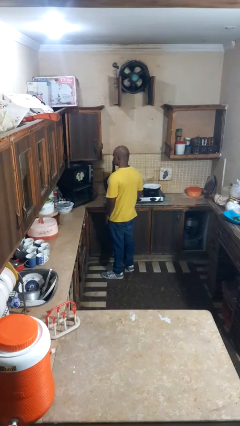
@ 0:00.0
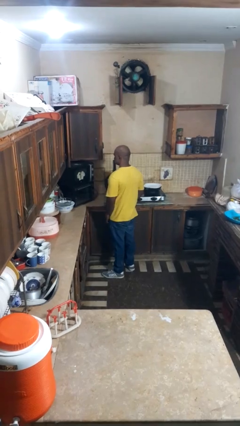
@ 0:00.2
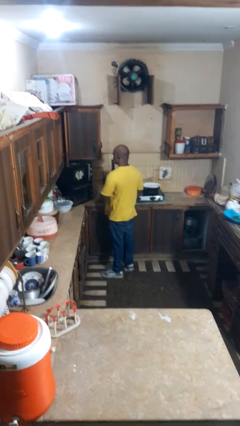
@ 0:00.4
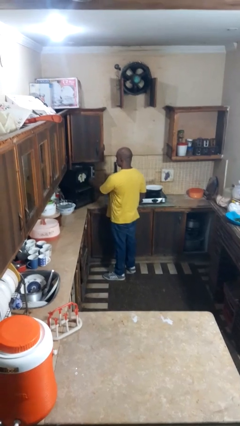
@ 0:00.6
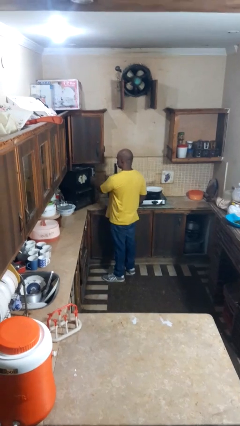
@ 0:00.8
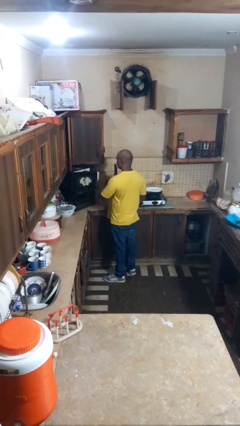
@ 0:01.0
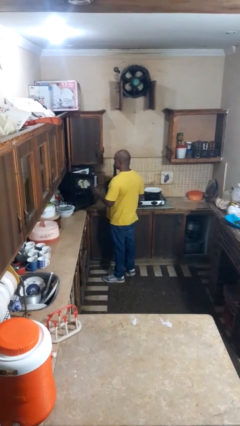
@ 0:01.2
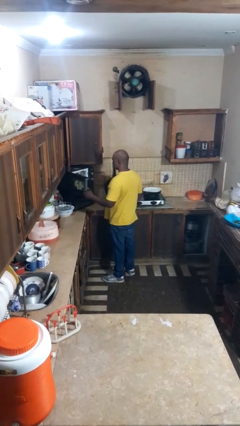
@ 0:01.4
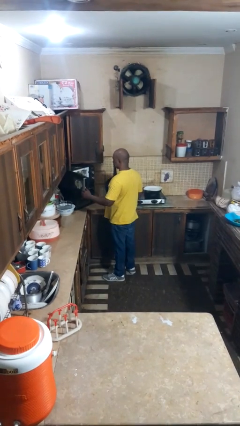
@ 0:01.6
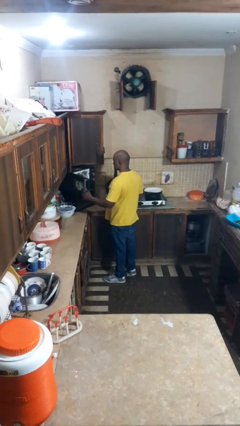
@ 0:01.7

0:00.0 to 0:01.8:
person opens microwave

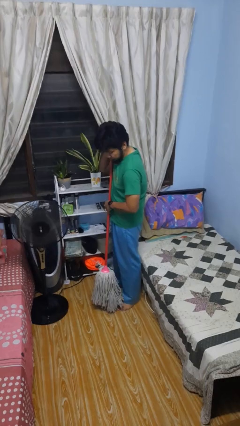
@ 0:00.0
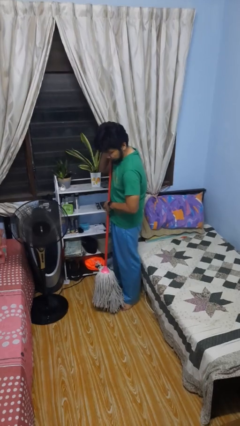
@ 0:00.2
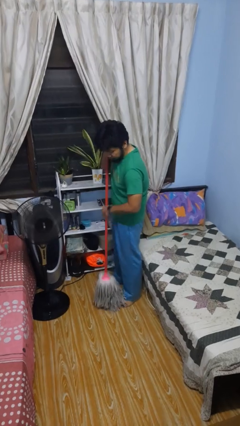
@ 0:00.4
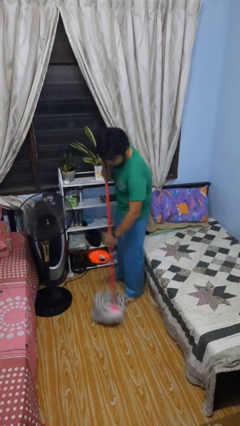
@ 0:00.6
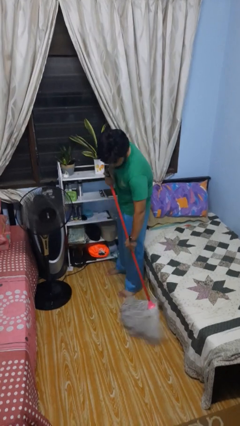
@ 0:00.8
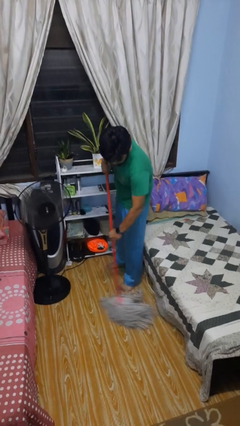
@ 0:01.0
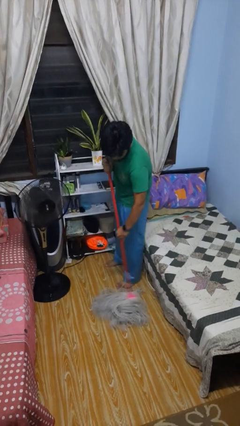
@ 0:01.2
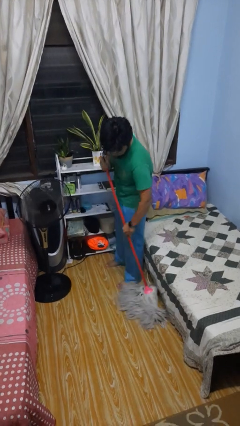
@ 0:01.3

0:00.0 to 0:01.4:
person mops

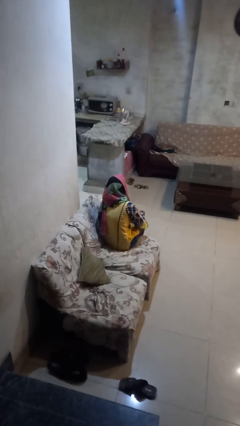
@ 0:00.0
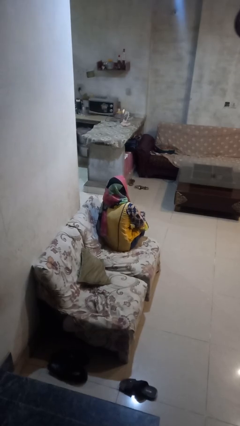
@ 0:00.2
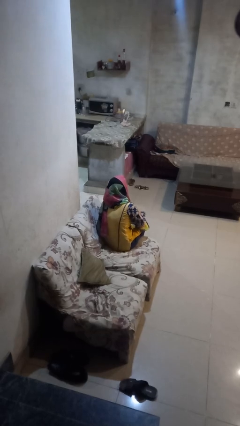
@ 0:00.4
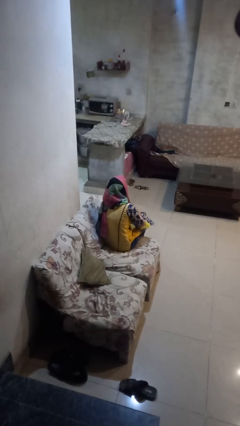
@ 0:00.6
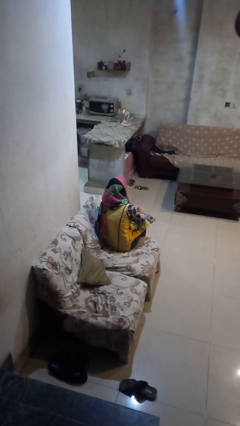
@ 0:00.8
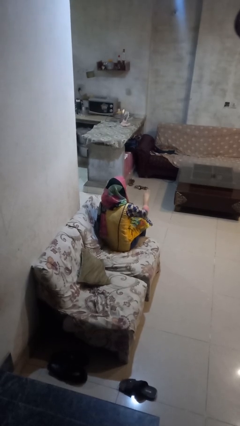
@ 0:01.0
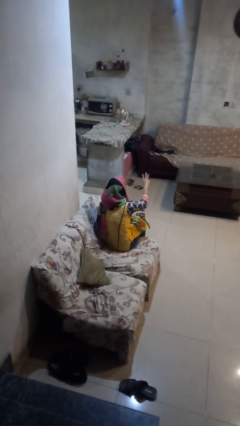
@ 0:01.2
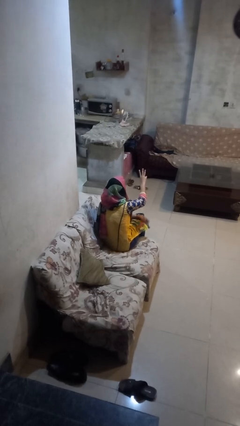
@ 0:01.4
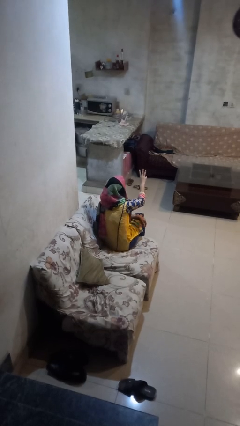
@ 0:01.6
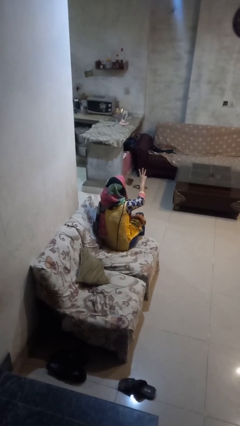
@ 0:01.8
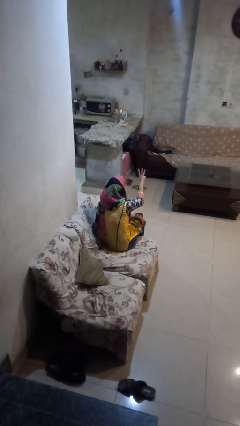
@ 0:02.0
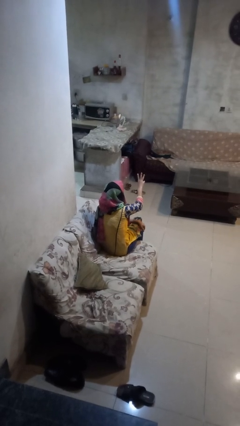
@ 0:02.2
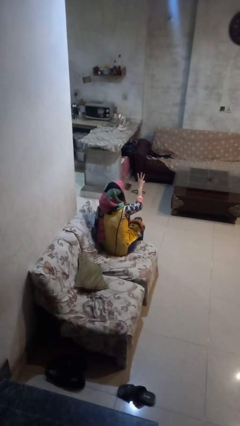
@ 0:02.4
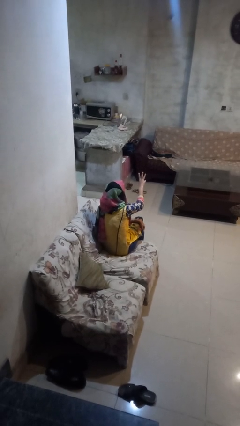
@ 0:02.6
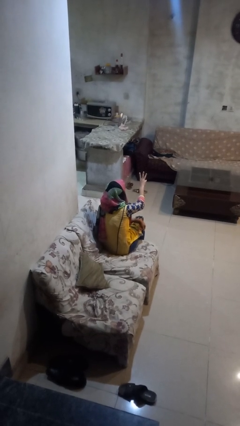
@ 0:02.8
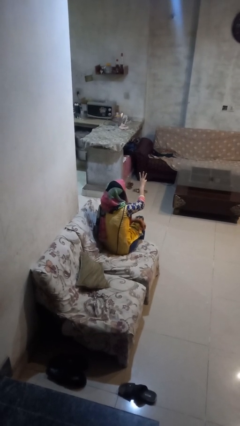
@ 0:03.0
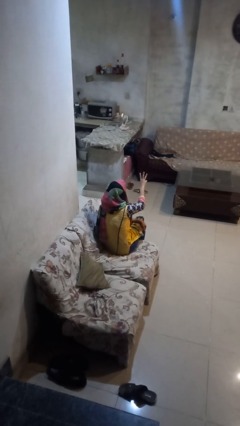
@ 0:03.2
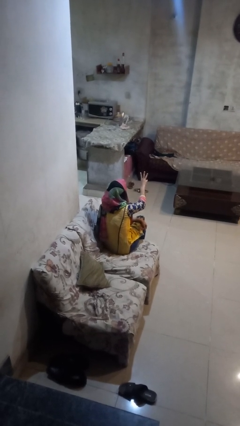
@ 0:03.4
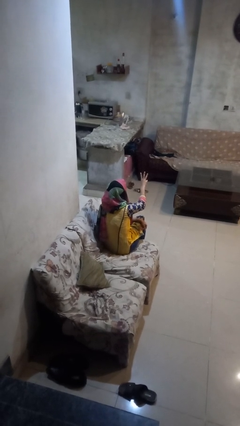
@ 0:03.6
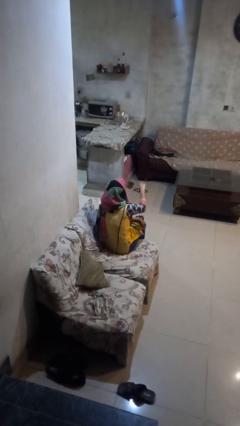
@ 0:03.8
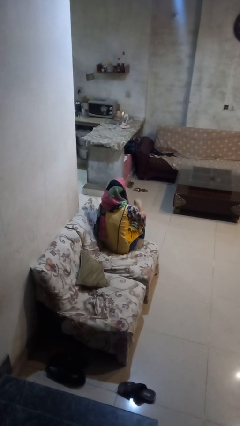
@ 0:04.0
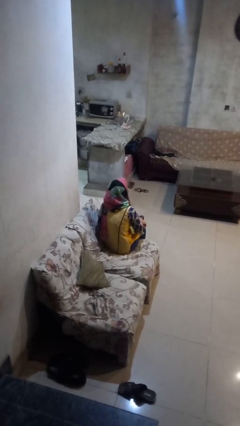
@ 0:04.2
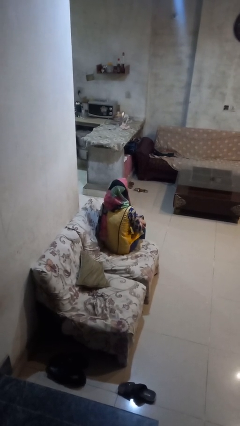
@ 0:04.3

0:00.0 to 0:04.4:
person gestures number three

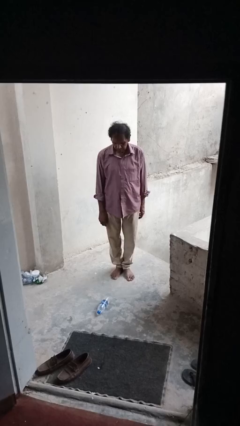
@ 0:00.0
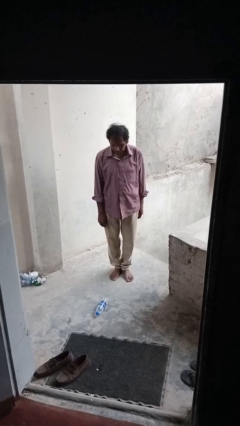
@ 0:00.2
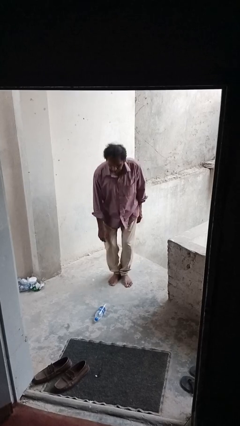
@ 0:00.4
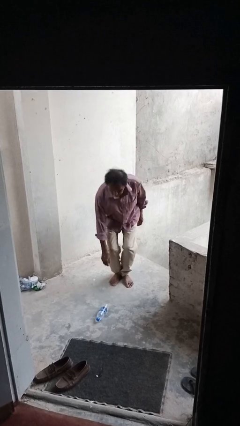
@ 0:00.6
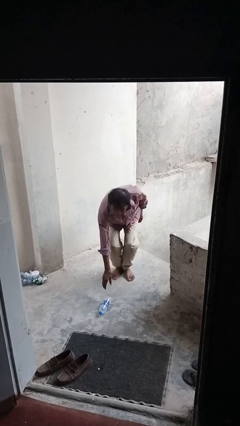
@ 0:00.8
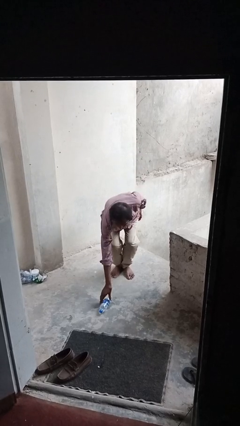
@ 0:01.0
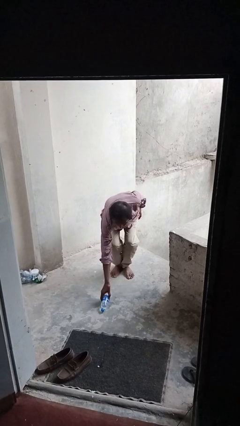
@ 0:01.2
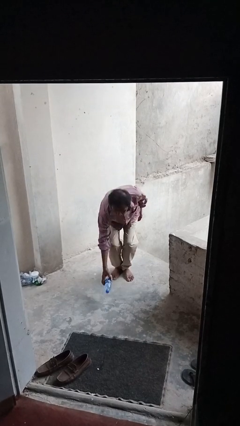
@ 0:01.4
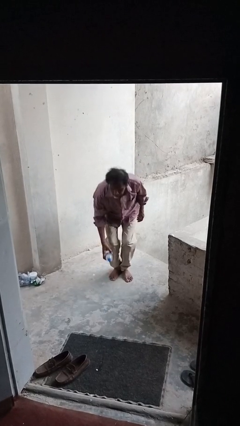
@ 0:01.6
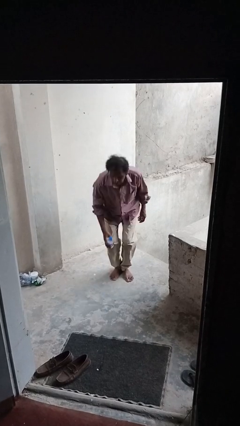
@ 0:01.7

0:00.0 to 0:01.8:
person picks up object from floor

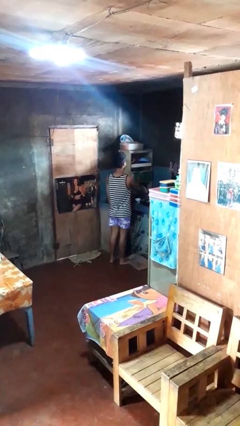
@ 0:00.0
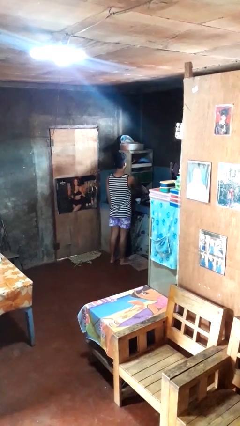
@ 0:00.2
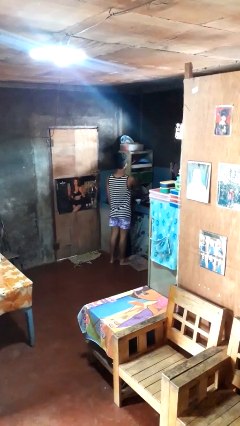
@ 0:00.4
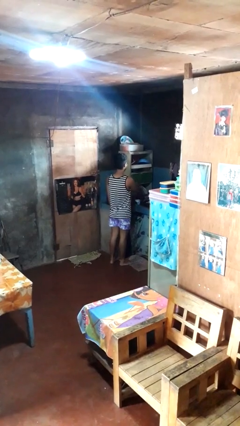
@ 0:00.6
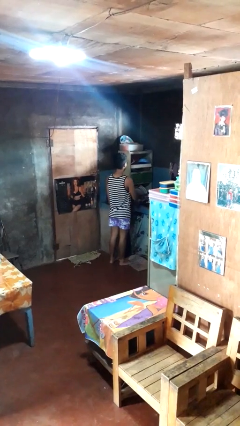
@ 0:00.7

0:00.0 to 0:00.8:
person closes kitchen drawer

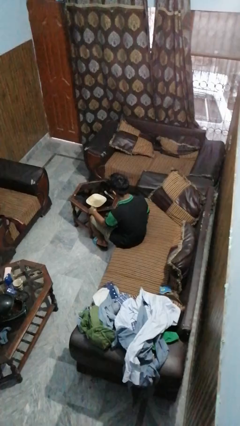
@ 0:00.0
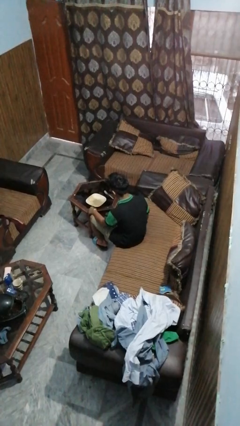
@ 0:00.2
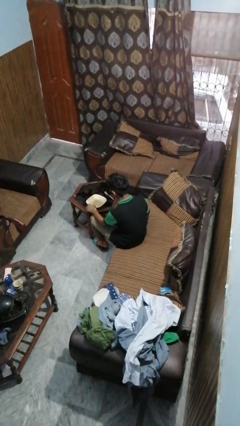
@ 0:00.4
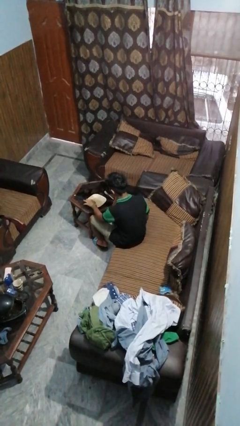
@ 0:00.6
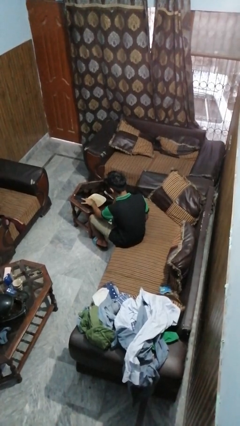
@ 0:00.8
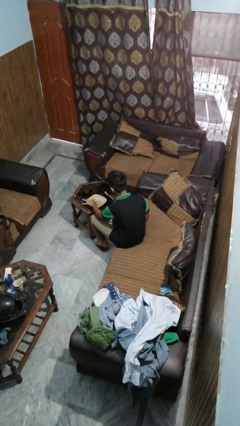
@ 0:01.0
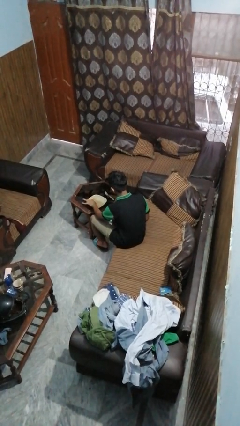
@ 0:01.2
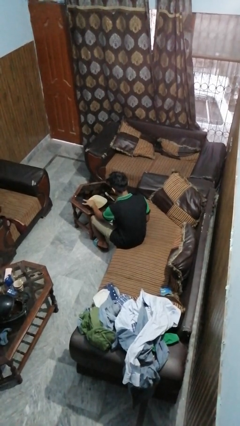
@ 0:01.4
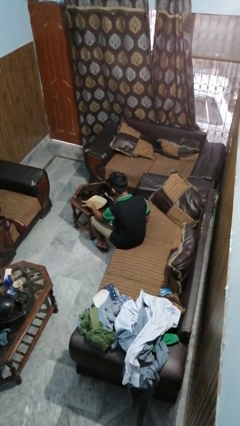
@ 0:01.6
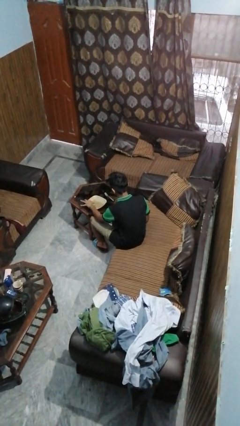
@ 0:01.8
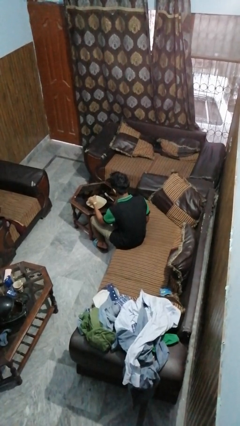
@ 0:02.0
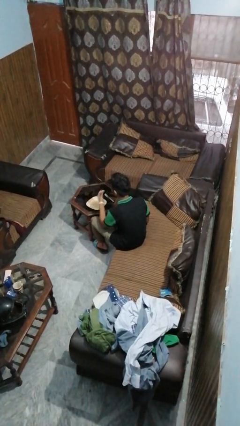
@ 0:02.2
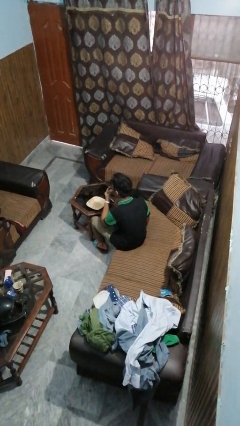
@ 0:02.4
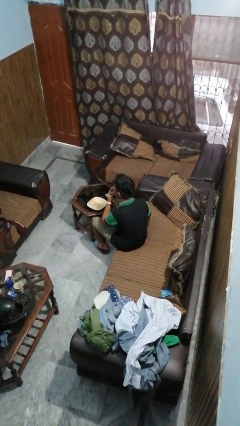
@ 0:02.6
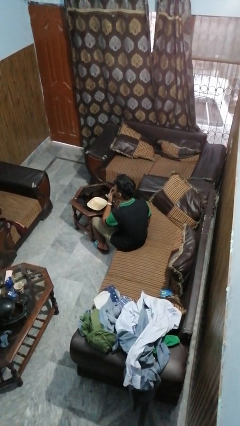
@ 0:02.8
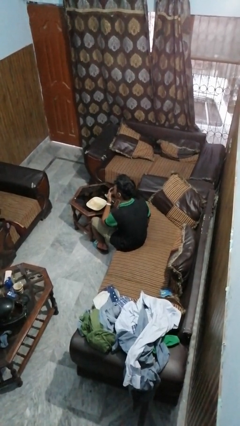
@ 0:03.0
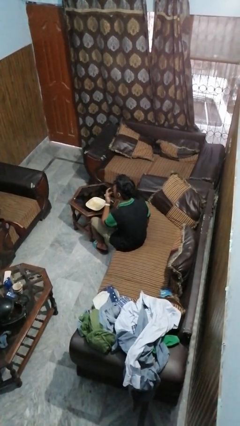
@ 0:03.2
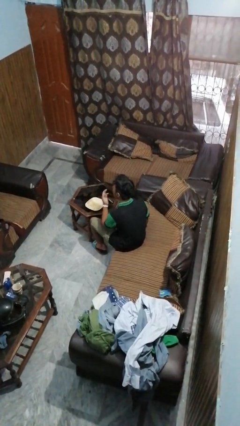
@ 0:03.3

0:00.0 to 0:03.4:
person eats with hands

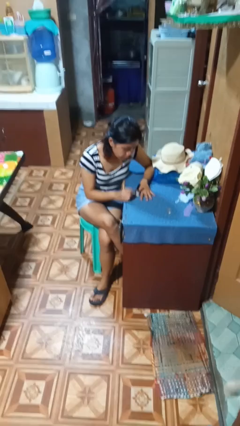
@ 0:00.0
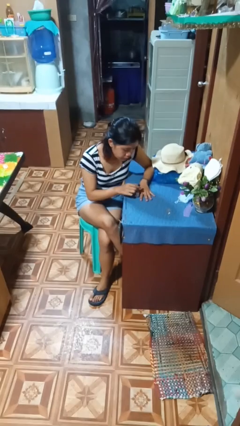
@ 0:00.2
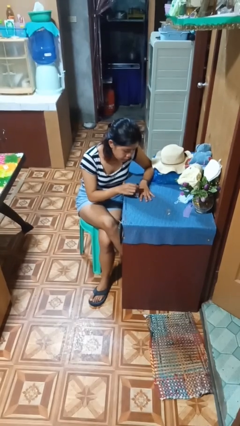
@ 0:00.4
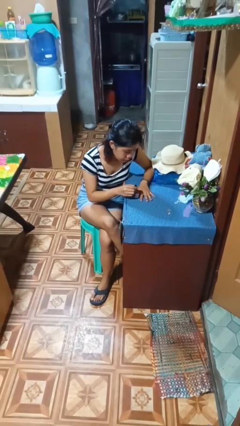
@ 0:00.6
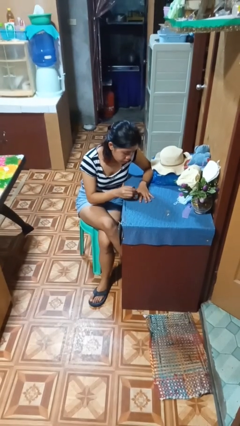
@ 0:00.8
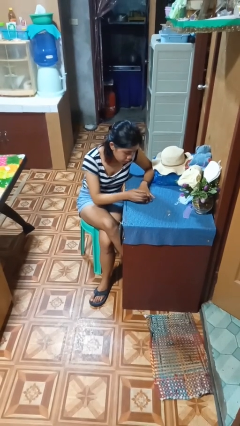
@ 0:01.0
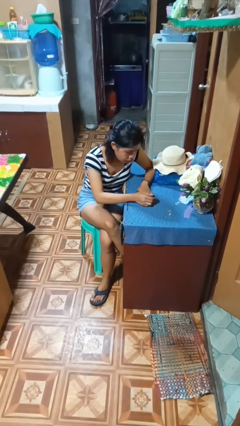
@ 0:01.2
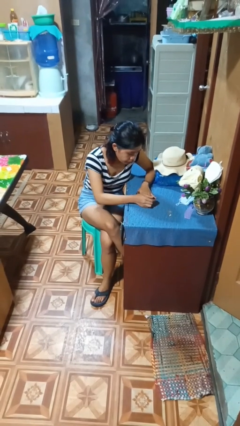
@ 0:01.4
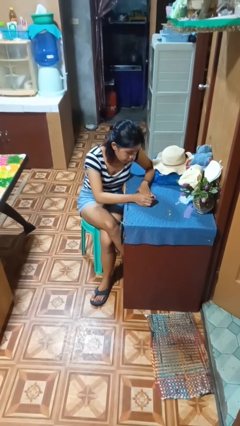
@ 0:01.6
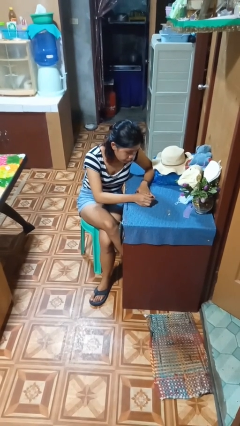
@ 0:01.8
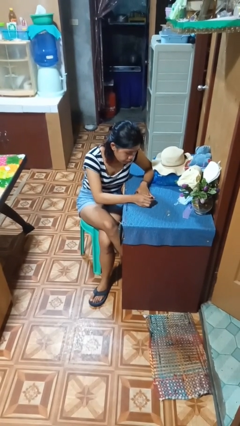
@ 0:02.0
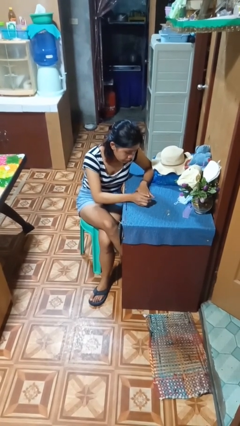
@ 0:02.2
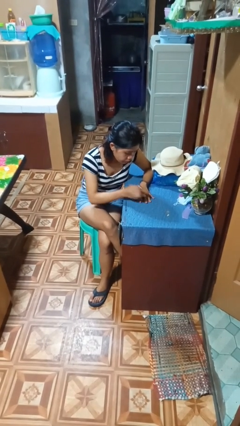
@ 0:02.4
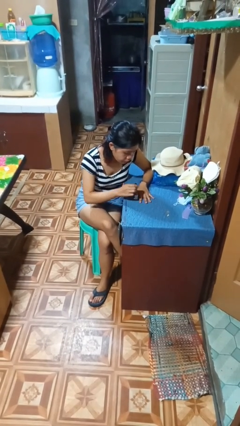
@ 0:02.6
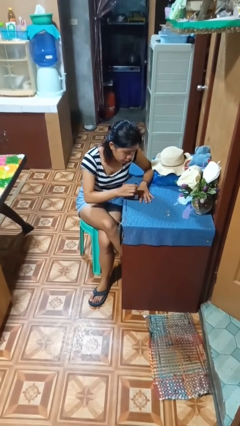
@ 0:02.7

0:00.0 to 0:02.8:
person paints fingernails

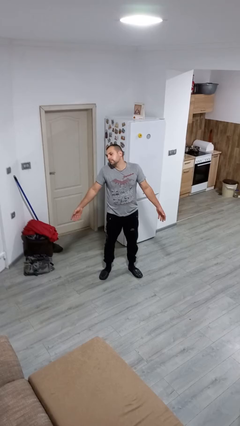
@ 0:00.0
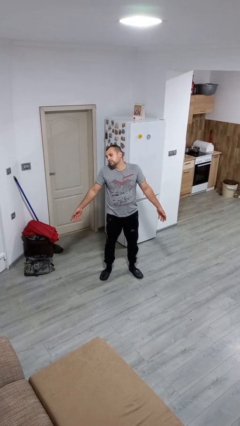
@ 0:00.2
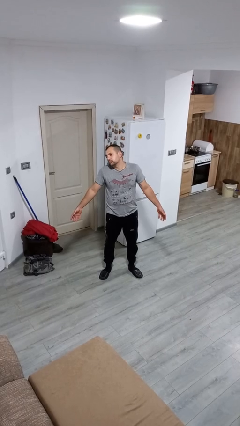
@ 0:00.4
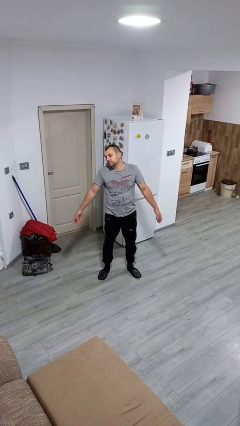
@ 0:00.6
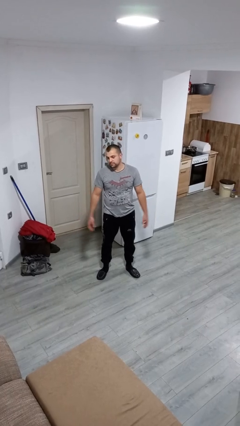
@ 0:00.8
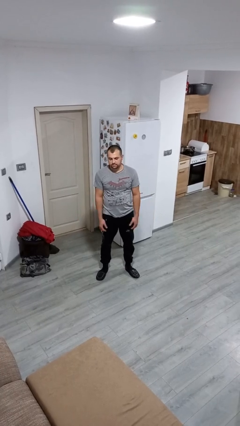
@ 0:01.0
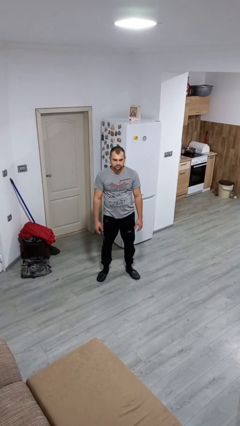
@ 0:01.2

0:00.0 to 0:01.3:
person shrugs
